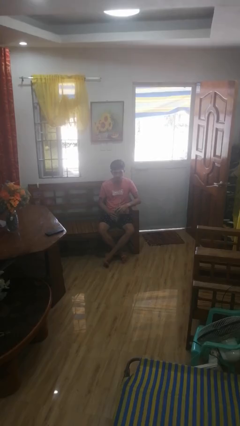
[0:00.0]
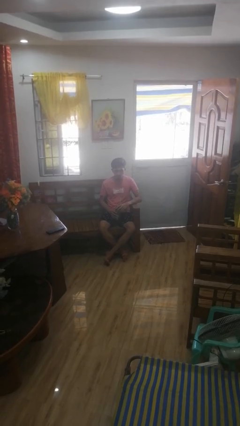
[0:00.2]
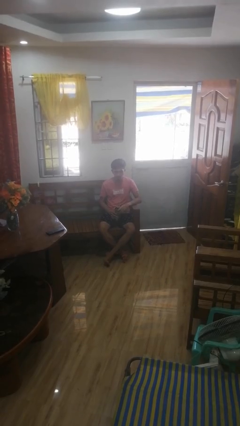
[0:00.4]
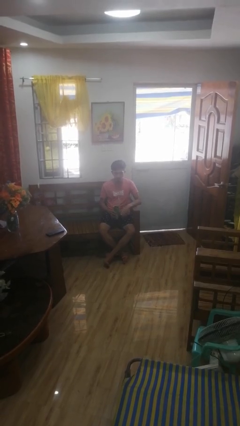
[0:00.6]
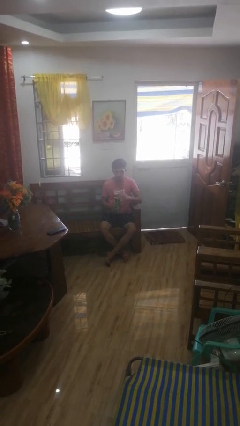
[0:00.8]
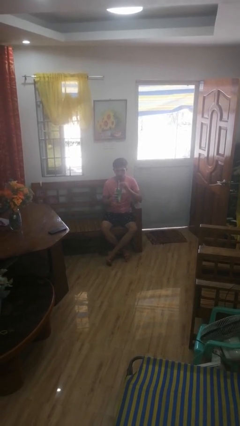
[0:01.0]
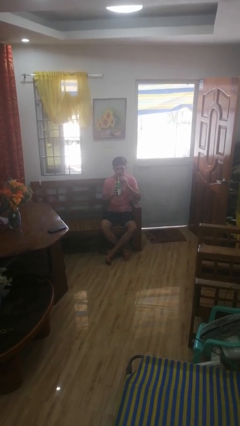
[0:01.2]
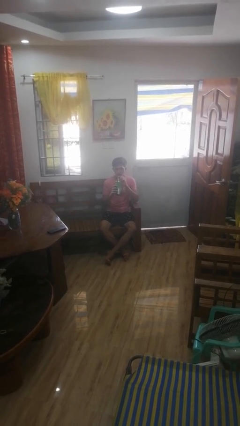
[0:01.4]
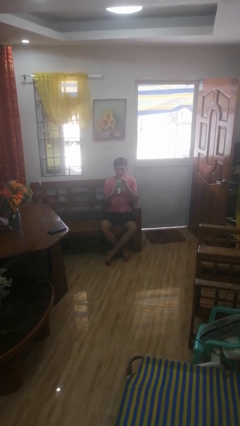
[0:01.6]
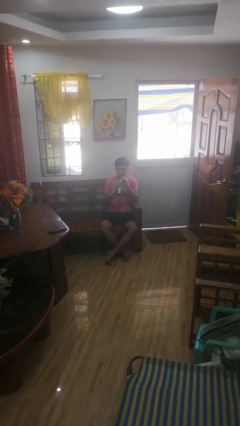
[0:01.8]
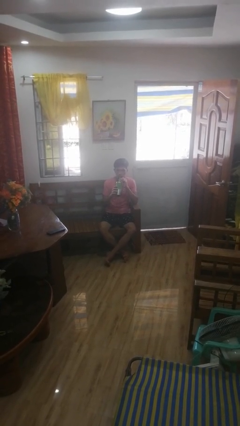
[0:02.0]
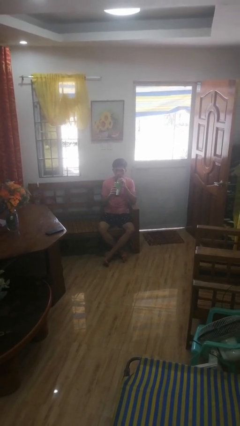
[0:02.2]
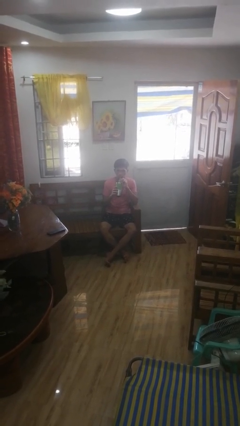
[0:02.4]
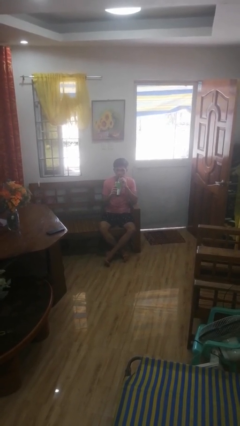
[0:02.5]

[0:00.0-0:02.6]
person drinks from straw

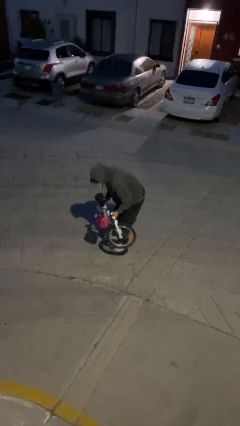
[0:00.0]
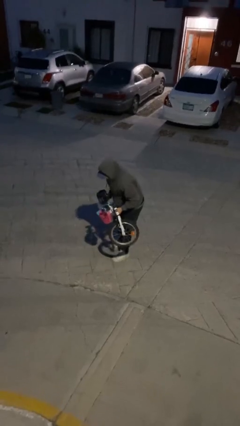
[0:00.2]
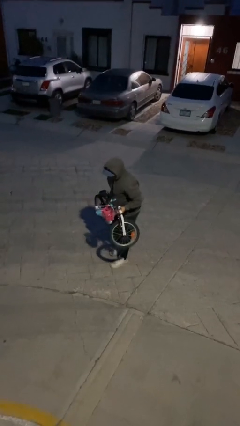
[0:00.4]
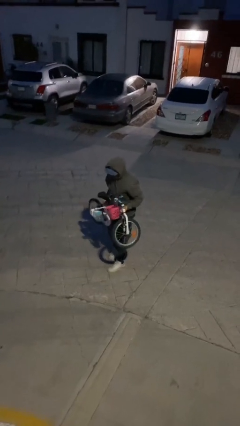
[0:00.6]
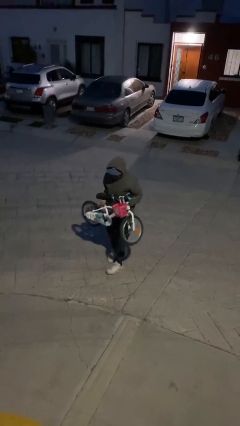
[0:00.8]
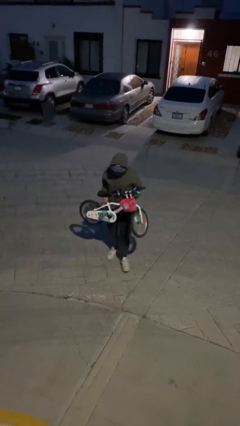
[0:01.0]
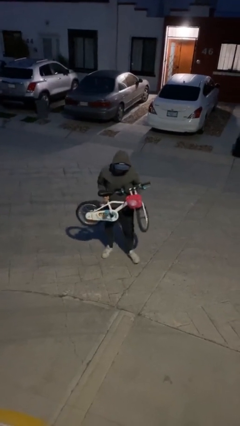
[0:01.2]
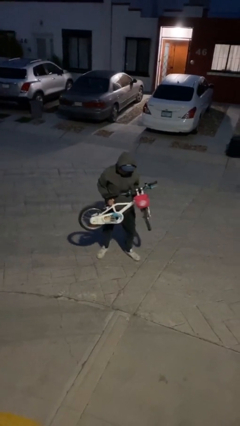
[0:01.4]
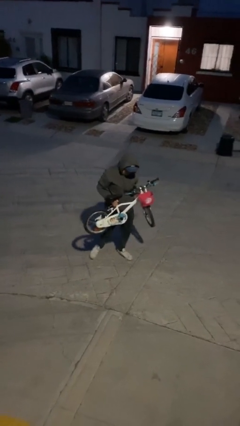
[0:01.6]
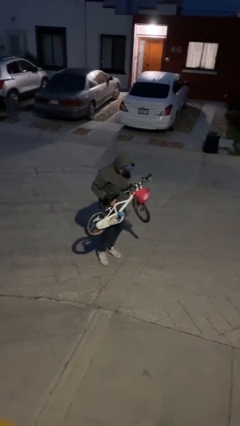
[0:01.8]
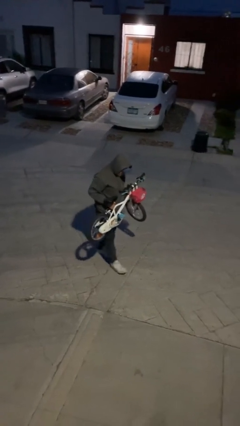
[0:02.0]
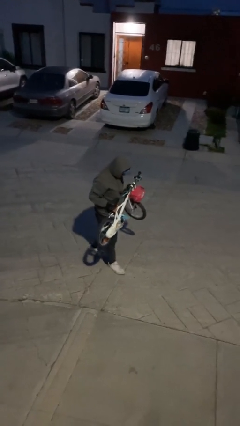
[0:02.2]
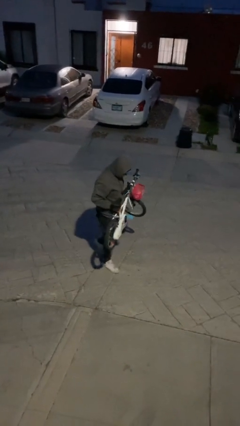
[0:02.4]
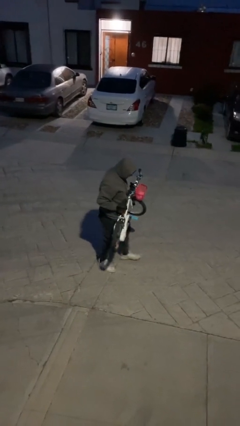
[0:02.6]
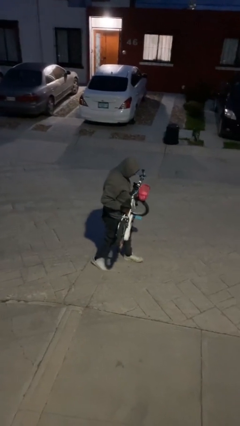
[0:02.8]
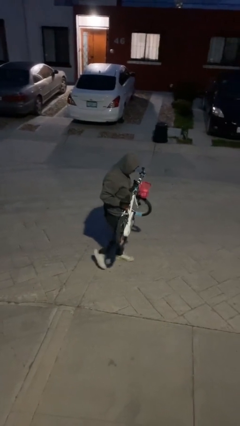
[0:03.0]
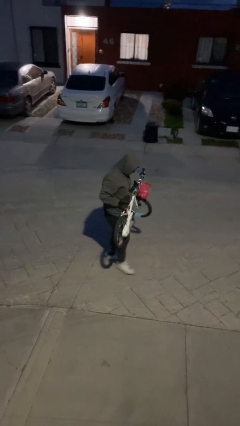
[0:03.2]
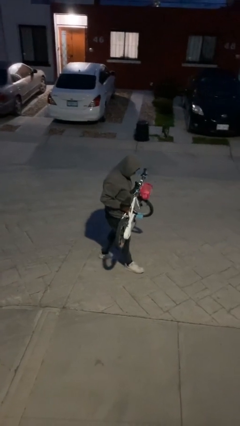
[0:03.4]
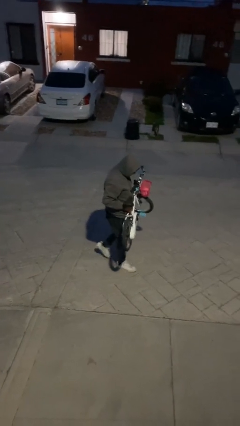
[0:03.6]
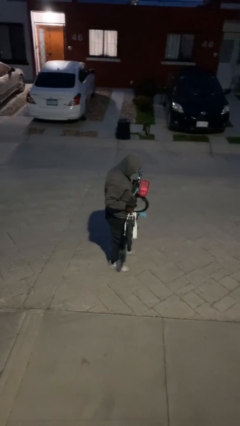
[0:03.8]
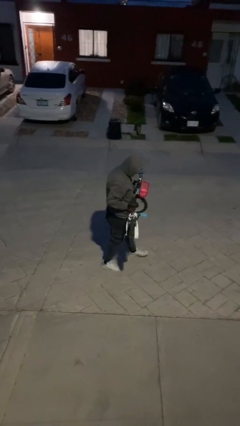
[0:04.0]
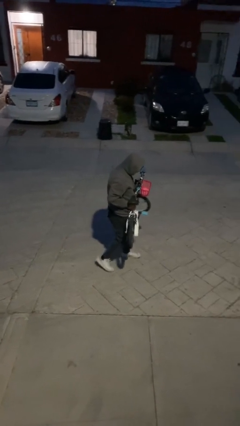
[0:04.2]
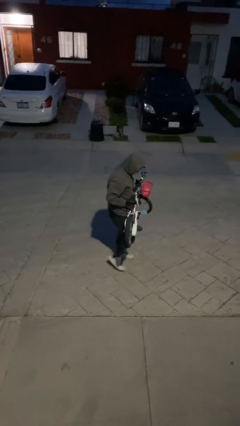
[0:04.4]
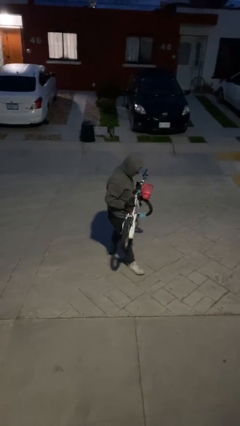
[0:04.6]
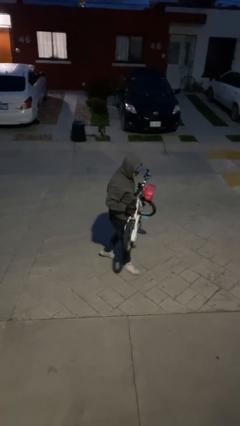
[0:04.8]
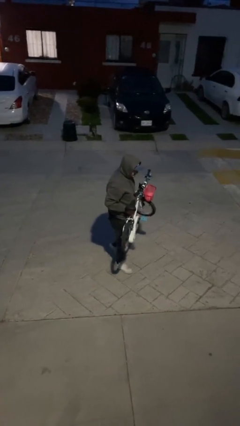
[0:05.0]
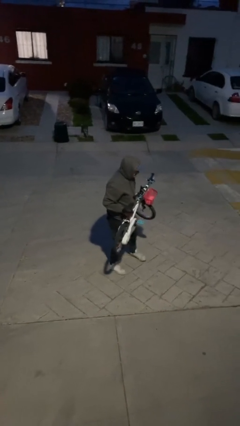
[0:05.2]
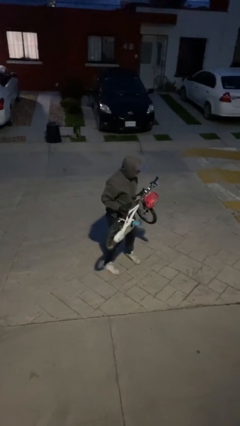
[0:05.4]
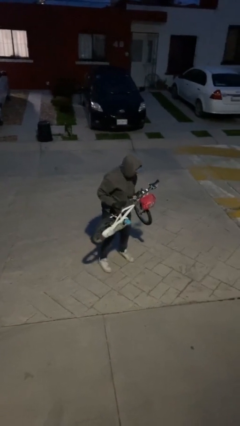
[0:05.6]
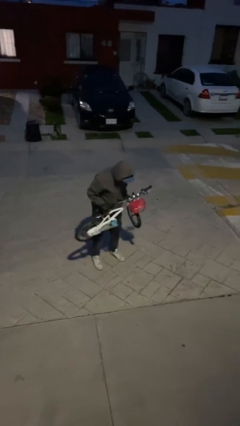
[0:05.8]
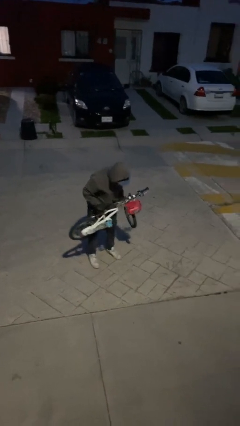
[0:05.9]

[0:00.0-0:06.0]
person carries heavy object

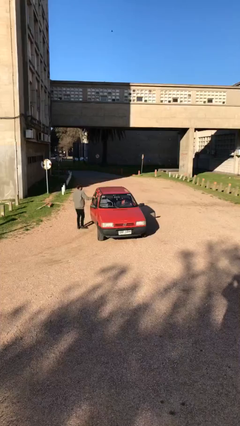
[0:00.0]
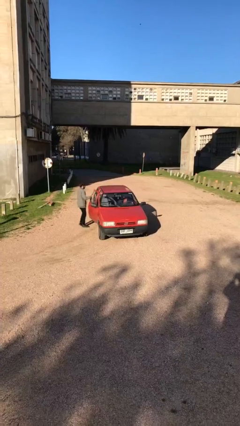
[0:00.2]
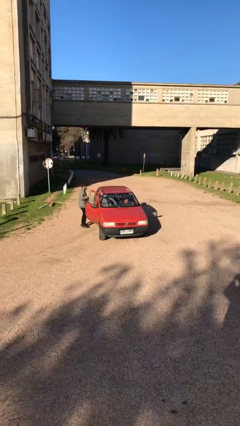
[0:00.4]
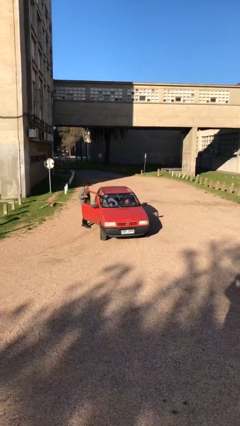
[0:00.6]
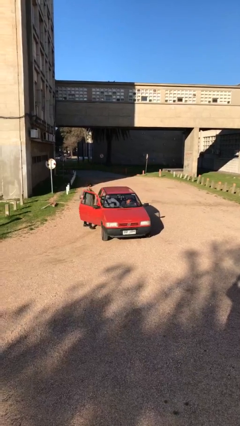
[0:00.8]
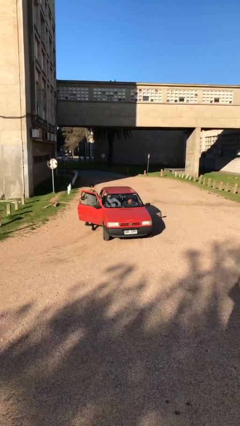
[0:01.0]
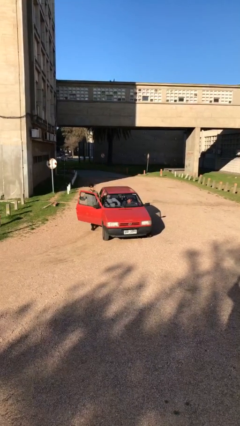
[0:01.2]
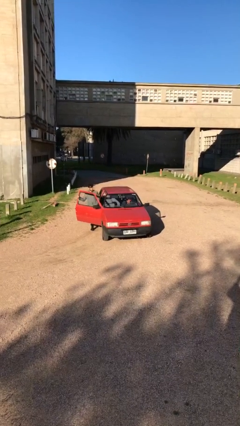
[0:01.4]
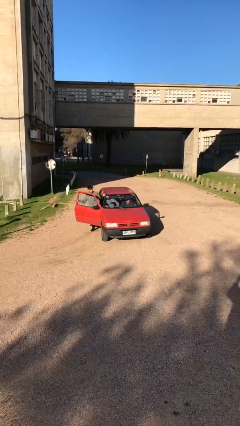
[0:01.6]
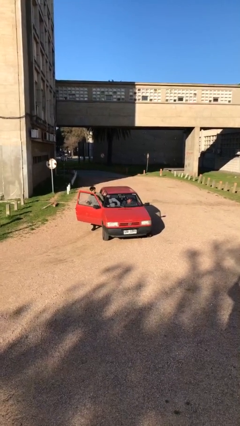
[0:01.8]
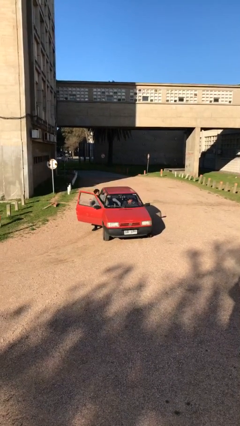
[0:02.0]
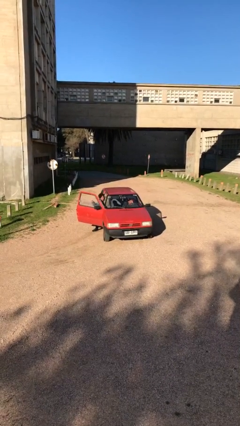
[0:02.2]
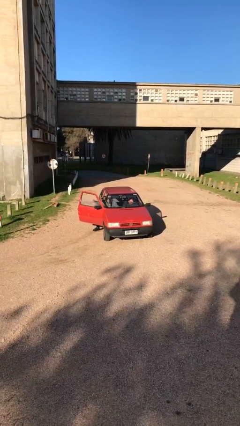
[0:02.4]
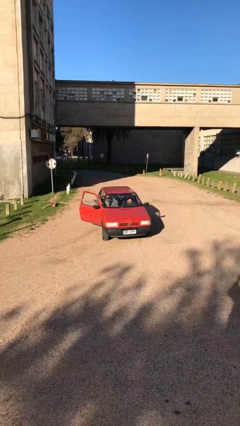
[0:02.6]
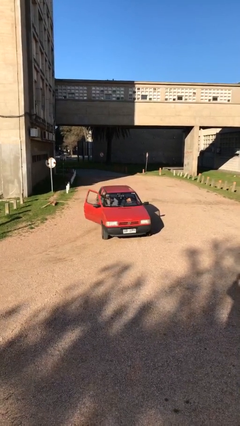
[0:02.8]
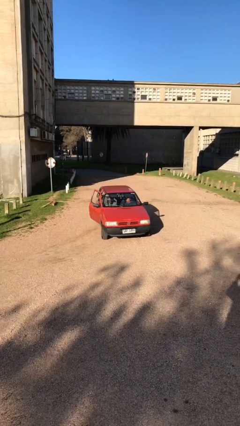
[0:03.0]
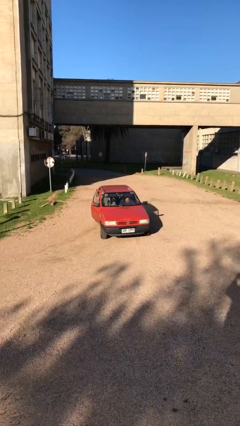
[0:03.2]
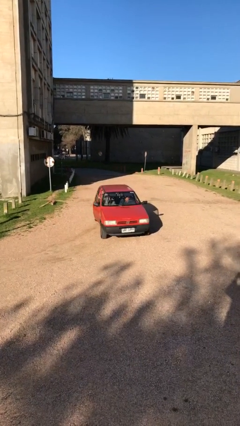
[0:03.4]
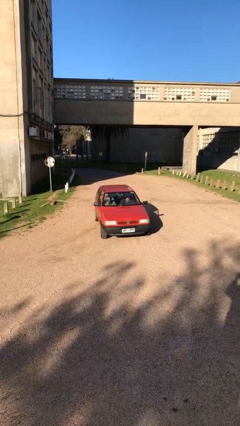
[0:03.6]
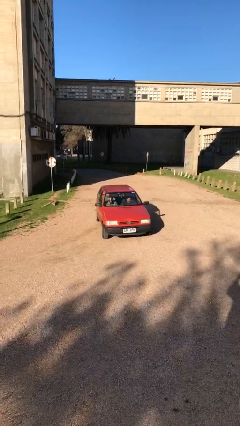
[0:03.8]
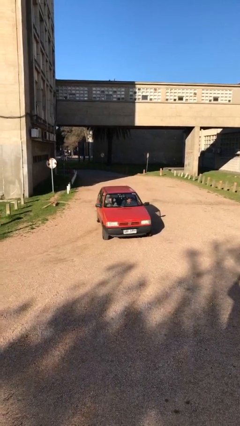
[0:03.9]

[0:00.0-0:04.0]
car picks up person

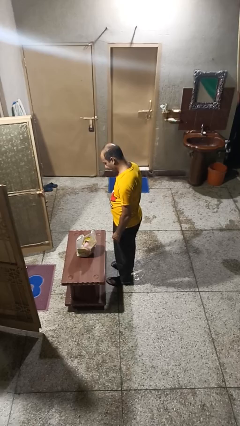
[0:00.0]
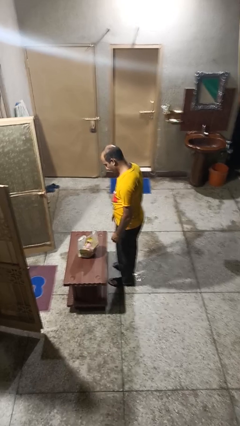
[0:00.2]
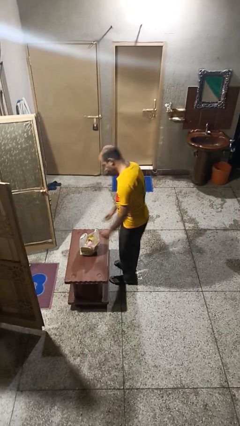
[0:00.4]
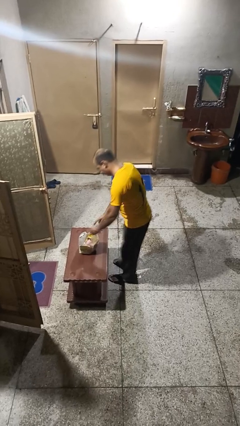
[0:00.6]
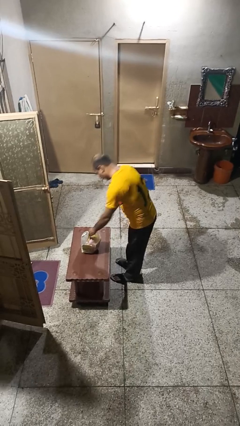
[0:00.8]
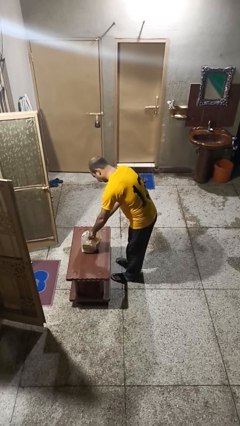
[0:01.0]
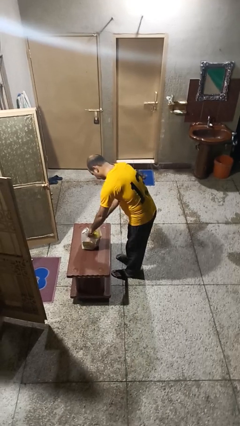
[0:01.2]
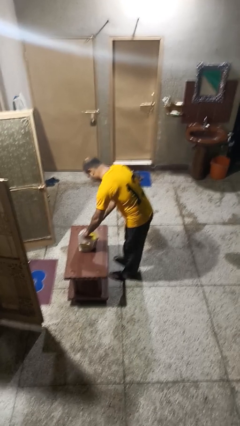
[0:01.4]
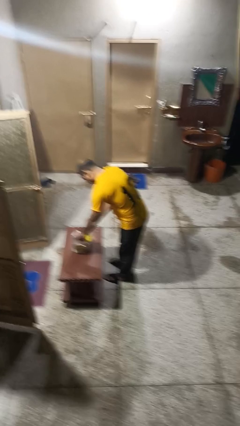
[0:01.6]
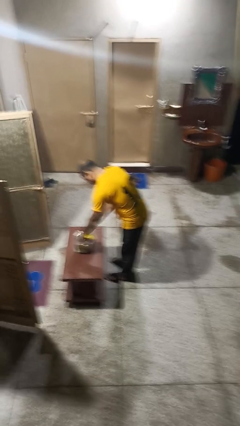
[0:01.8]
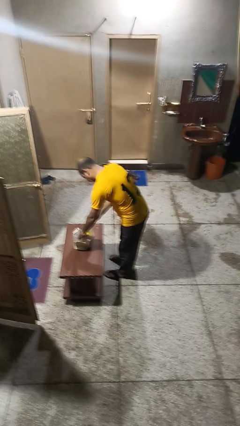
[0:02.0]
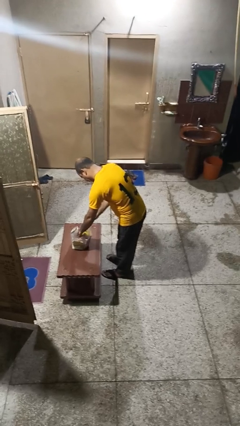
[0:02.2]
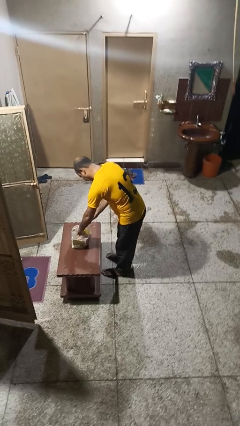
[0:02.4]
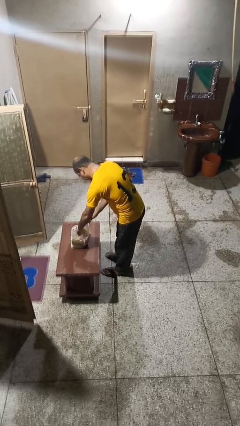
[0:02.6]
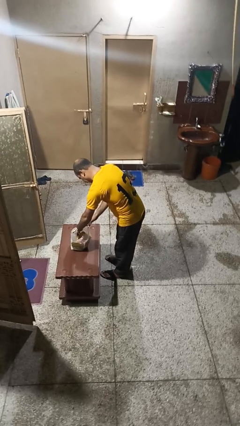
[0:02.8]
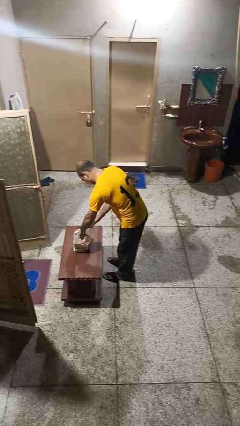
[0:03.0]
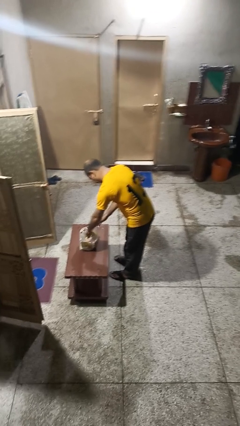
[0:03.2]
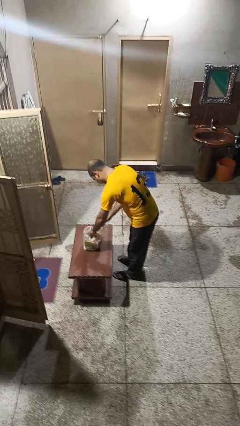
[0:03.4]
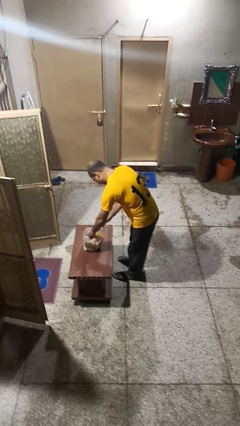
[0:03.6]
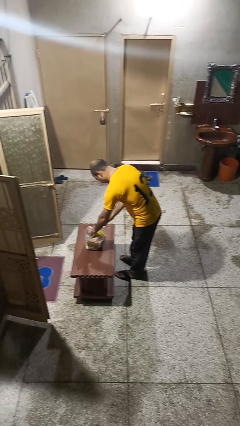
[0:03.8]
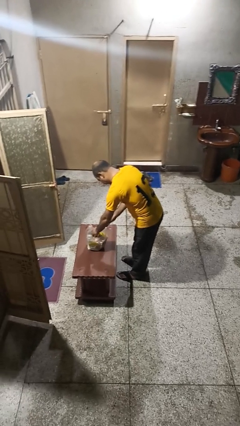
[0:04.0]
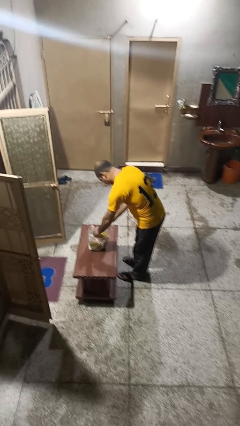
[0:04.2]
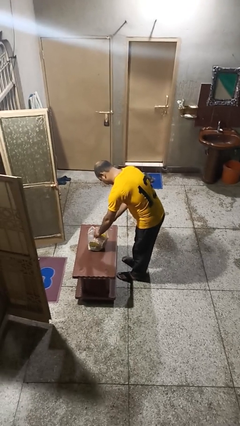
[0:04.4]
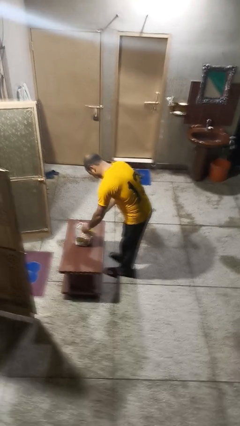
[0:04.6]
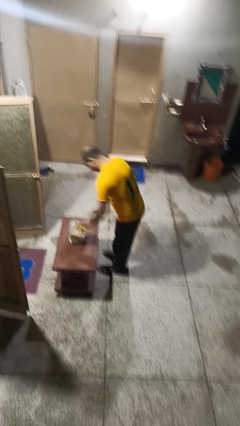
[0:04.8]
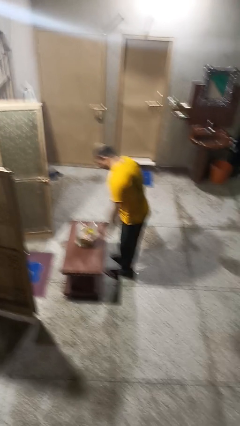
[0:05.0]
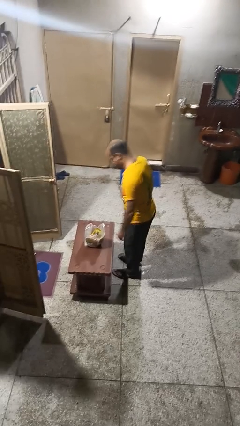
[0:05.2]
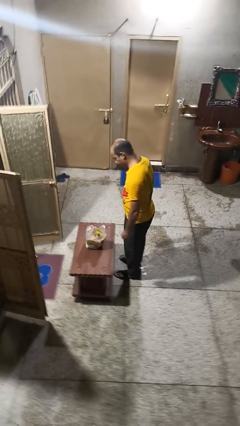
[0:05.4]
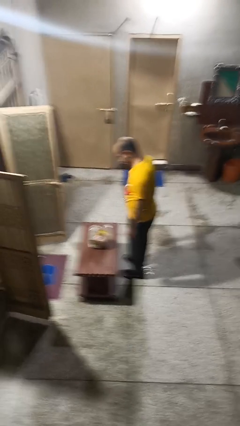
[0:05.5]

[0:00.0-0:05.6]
person searches in bag
